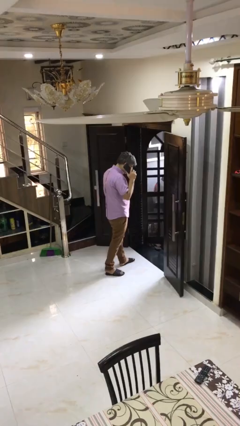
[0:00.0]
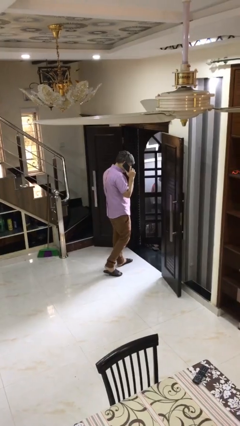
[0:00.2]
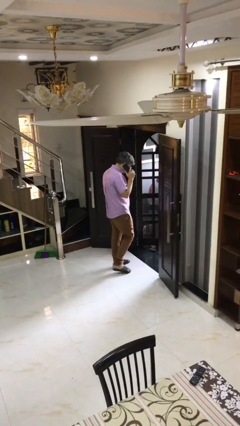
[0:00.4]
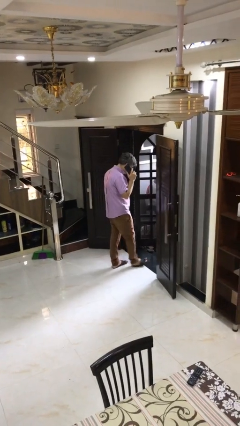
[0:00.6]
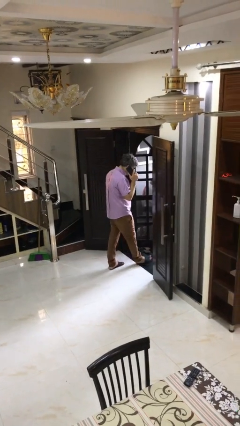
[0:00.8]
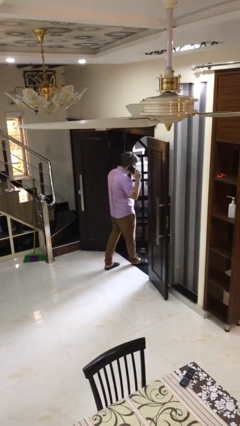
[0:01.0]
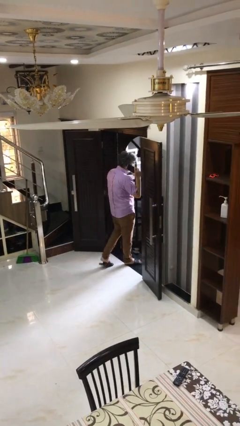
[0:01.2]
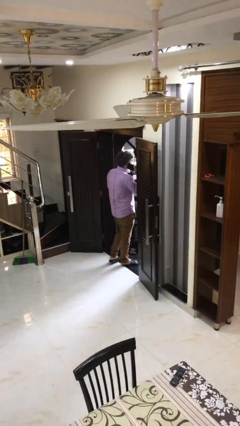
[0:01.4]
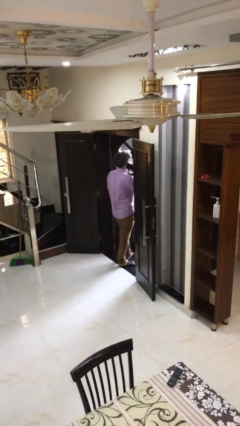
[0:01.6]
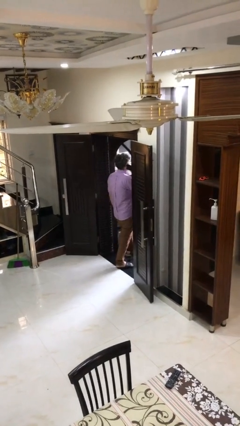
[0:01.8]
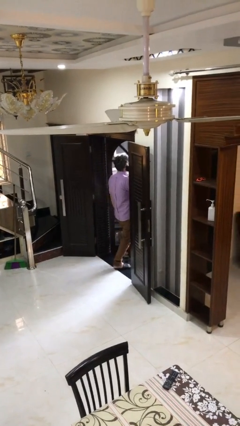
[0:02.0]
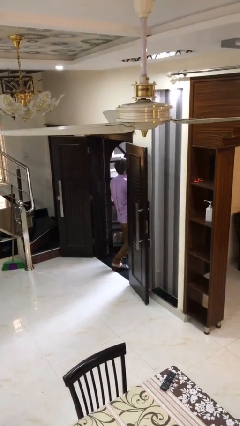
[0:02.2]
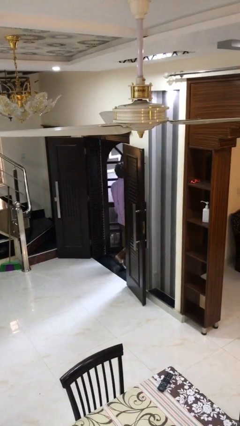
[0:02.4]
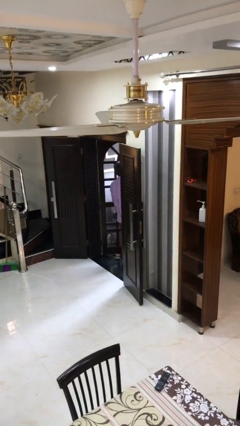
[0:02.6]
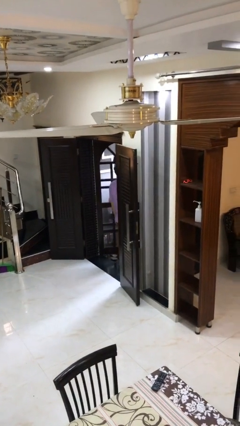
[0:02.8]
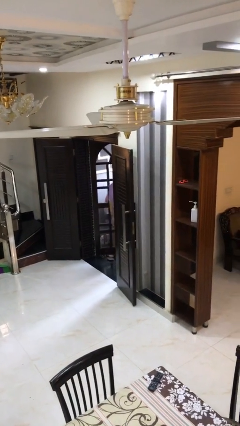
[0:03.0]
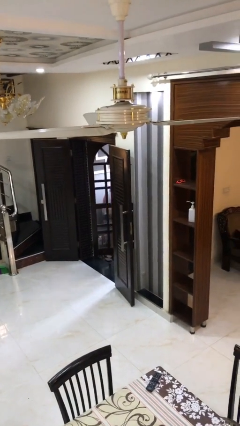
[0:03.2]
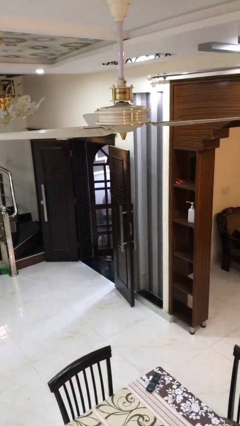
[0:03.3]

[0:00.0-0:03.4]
person exits scene through structure

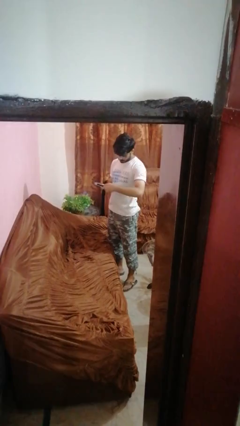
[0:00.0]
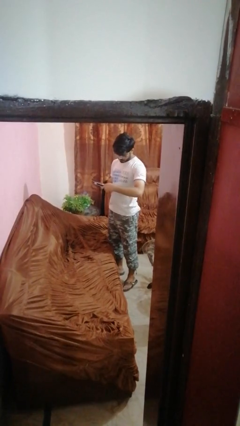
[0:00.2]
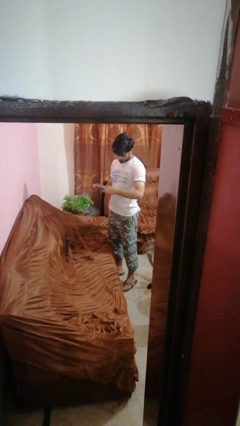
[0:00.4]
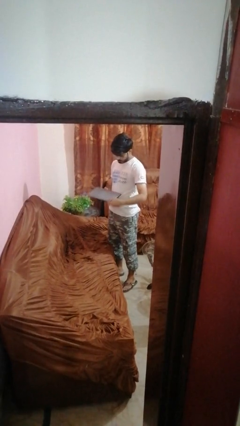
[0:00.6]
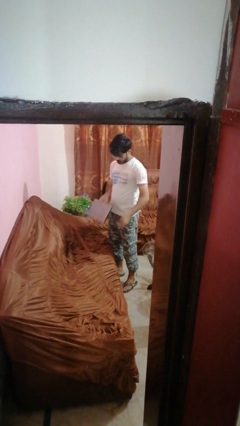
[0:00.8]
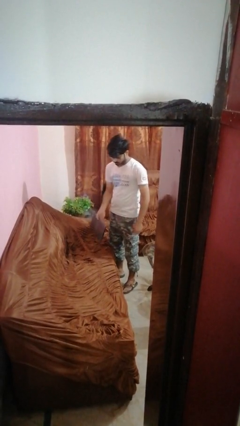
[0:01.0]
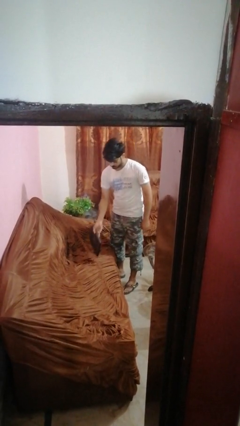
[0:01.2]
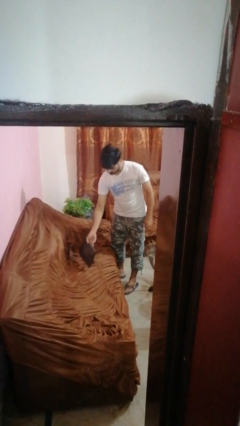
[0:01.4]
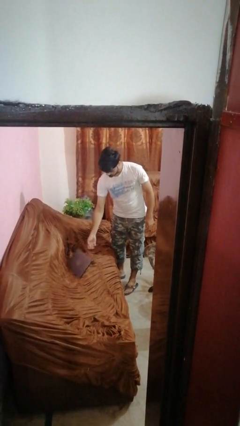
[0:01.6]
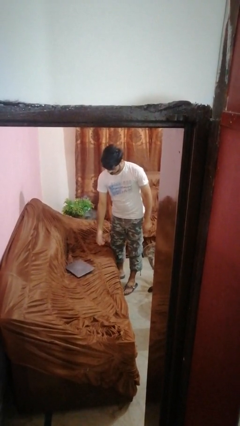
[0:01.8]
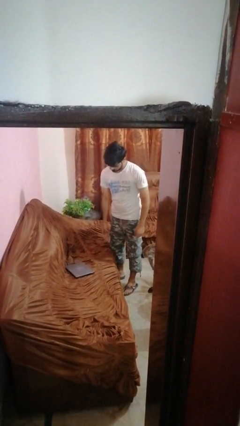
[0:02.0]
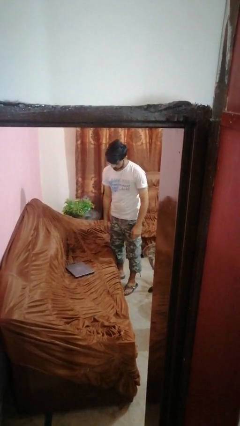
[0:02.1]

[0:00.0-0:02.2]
person puts down object on couch

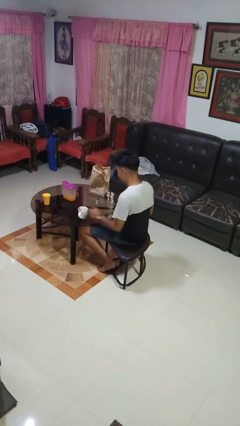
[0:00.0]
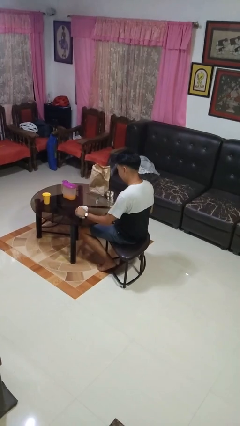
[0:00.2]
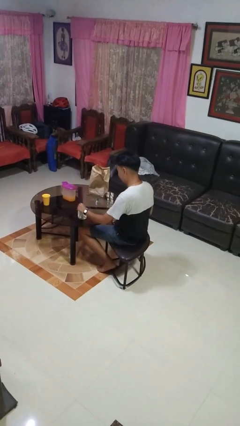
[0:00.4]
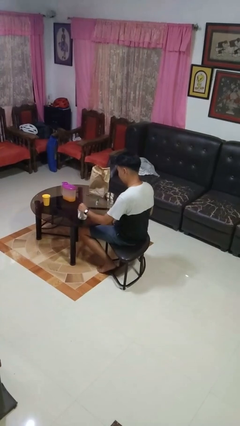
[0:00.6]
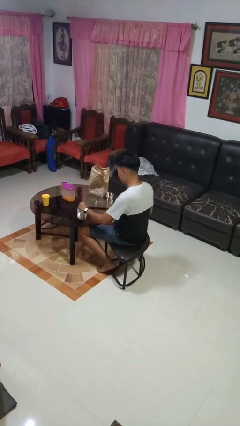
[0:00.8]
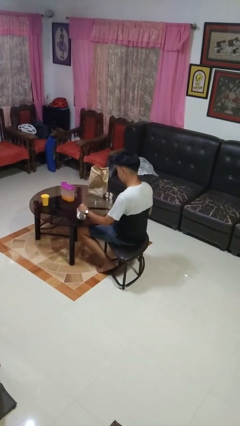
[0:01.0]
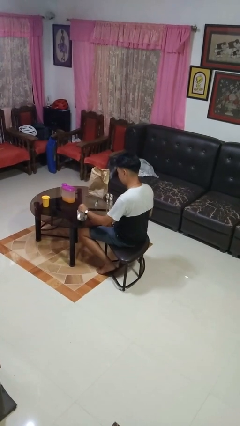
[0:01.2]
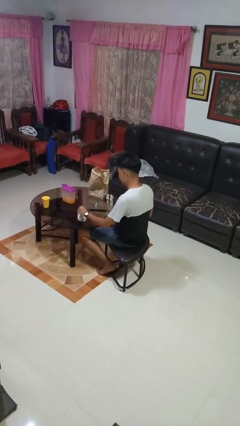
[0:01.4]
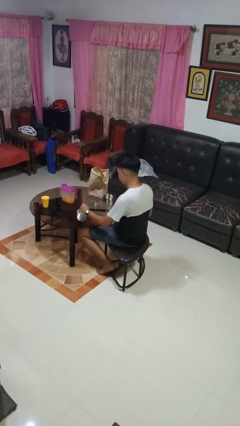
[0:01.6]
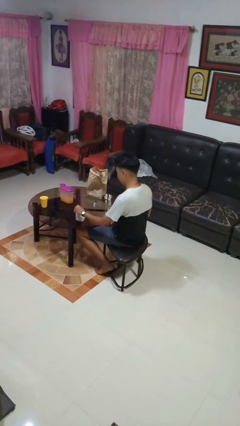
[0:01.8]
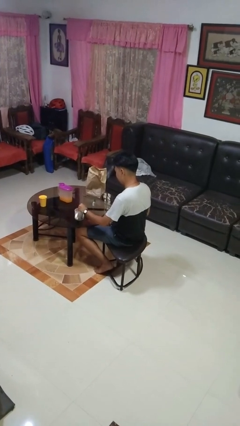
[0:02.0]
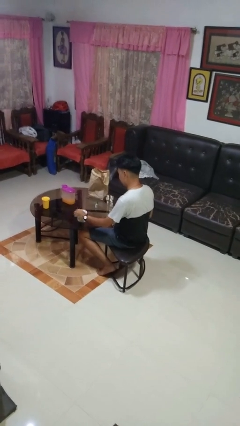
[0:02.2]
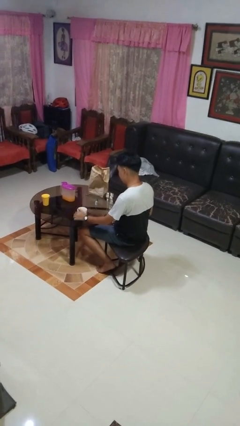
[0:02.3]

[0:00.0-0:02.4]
person stirs mug

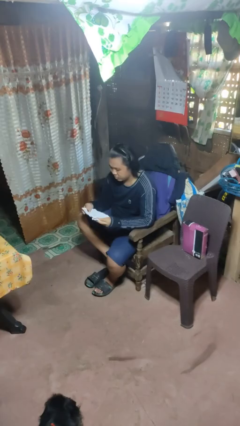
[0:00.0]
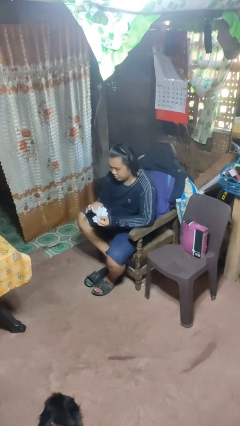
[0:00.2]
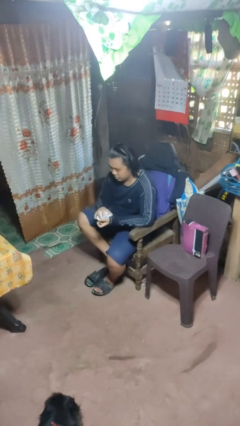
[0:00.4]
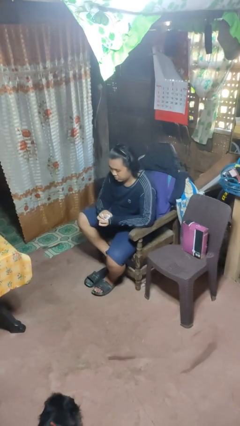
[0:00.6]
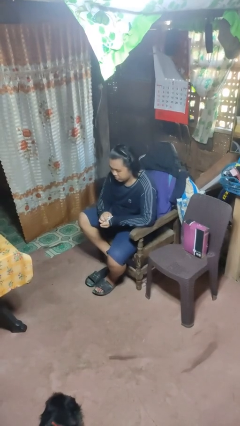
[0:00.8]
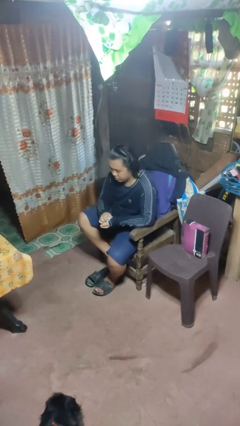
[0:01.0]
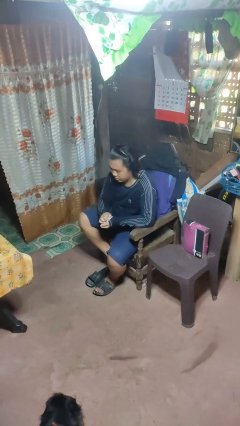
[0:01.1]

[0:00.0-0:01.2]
person crumples paper

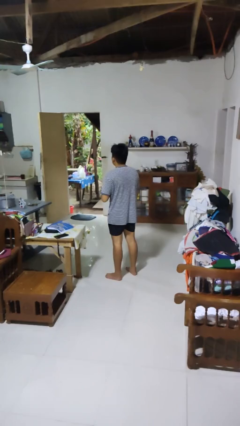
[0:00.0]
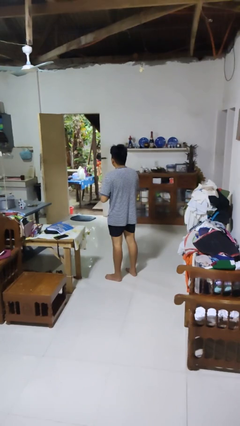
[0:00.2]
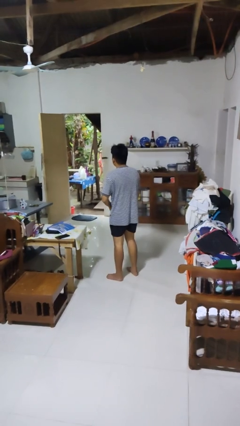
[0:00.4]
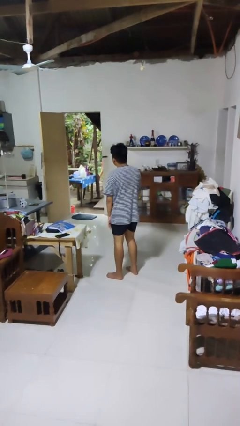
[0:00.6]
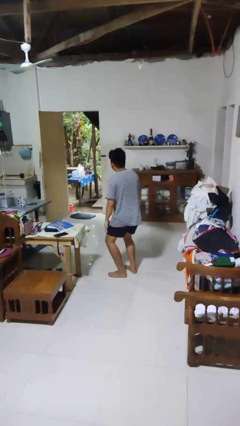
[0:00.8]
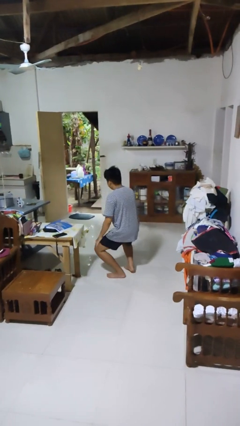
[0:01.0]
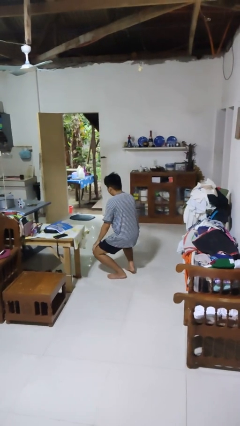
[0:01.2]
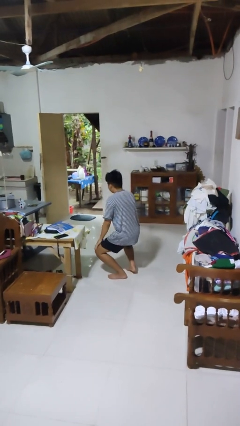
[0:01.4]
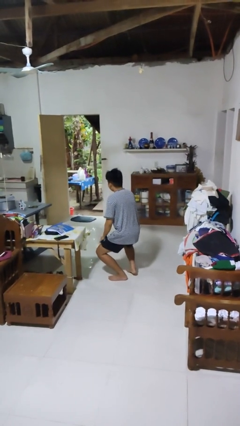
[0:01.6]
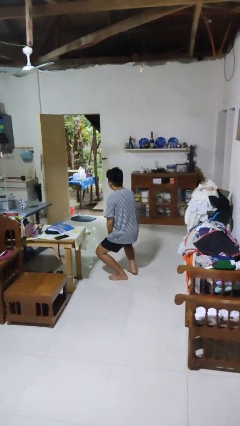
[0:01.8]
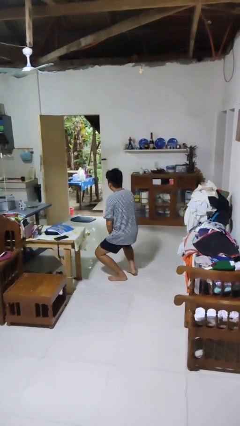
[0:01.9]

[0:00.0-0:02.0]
person squats

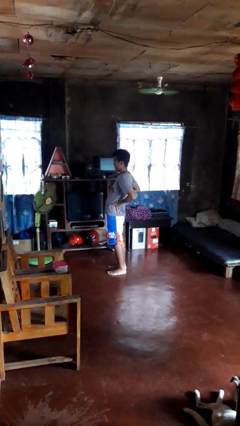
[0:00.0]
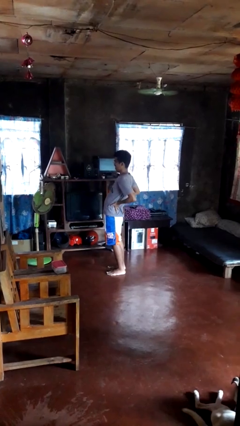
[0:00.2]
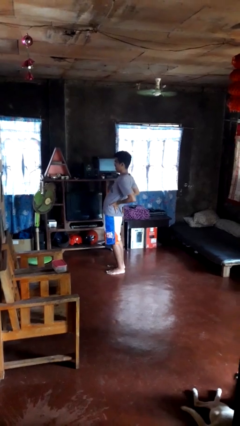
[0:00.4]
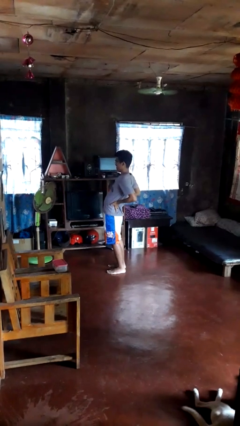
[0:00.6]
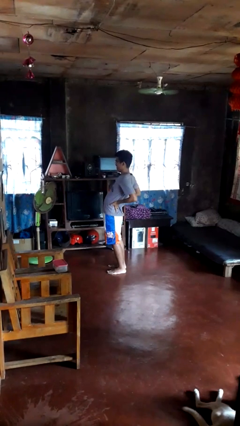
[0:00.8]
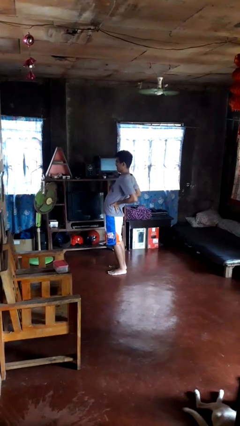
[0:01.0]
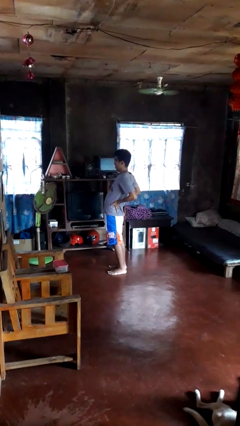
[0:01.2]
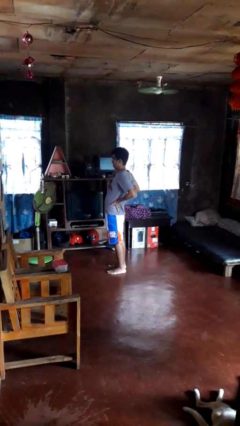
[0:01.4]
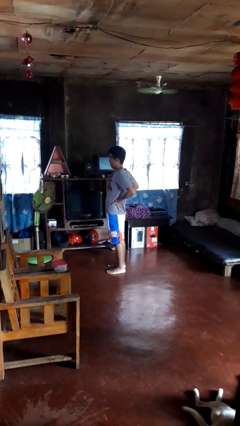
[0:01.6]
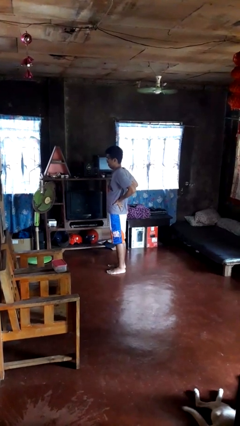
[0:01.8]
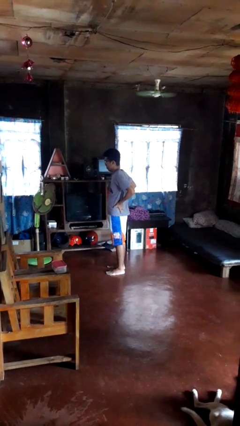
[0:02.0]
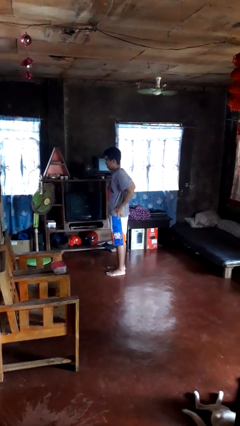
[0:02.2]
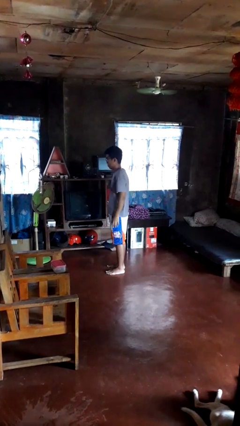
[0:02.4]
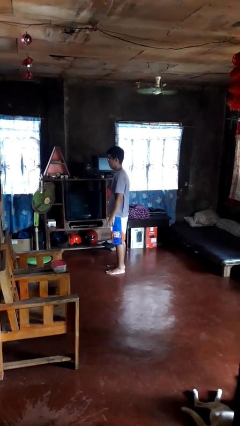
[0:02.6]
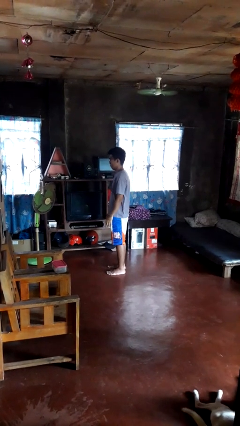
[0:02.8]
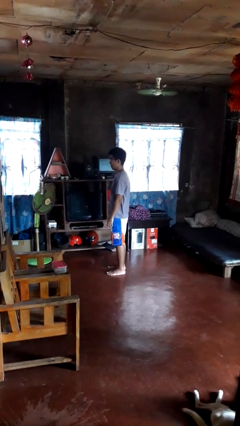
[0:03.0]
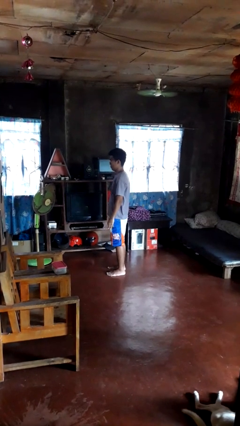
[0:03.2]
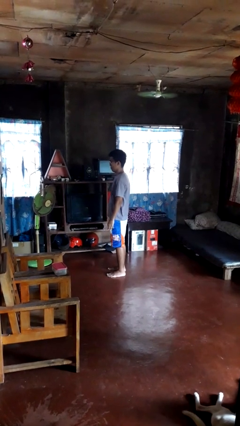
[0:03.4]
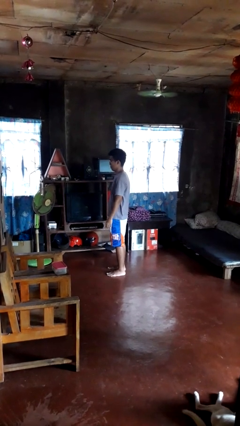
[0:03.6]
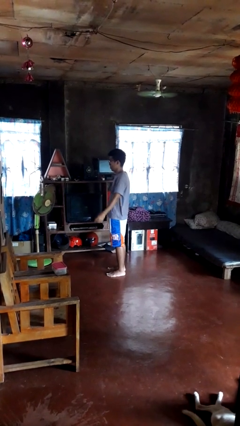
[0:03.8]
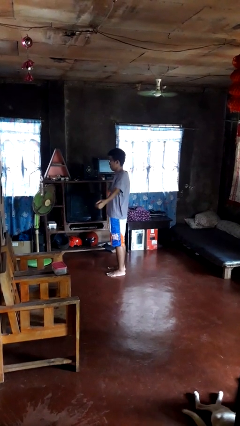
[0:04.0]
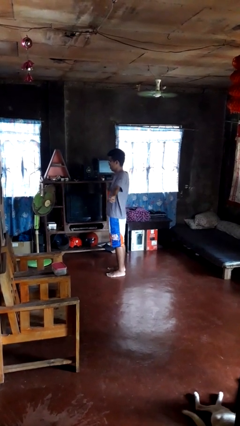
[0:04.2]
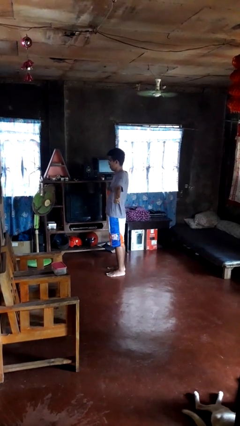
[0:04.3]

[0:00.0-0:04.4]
person stretches back

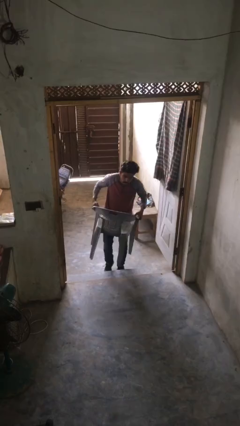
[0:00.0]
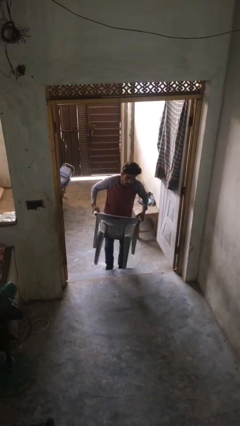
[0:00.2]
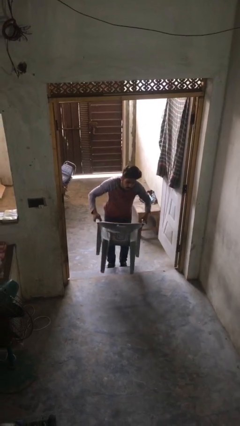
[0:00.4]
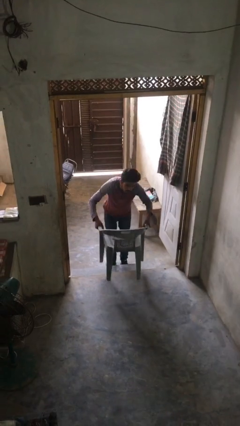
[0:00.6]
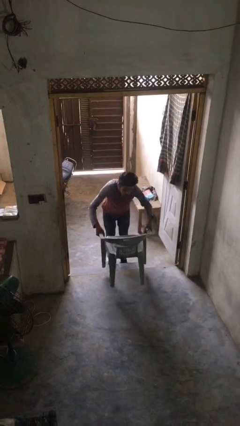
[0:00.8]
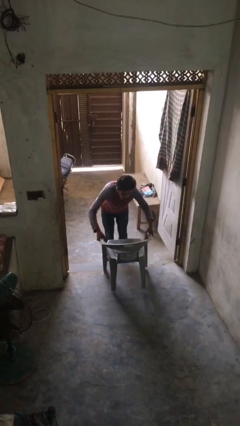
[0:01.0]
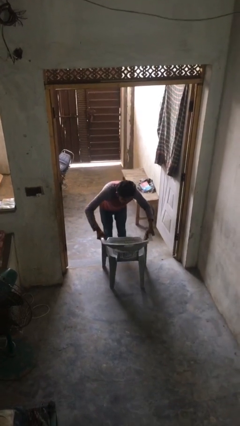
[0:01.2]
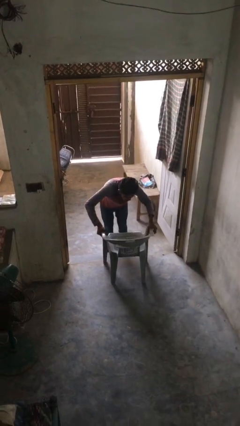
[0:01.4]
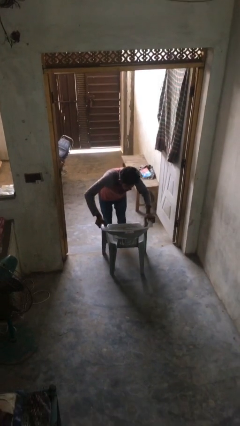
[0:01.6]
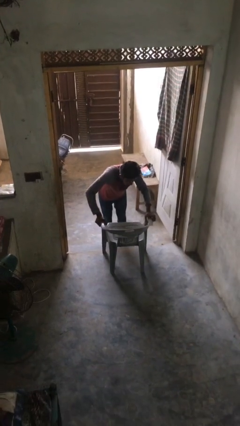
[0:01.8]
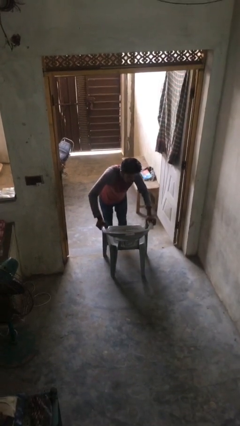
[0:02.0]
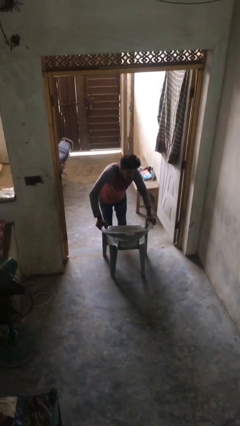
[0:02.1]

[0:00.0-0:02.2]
person puts down object on floor
